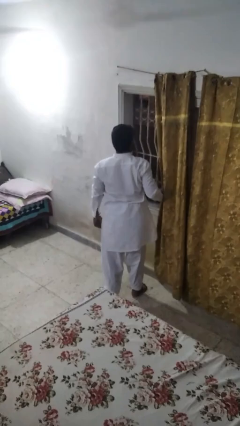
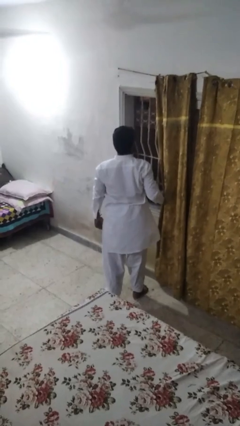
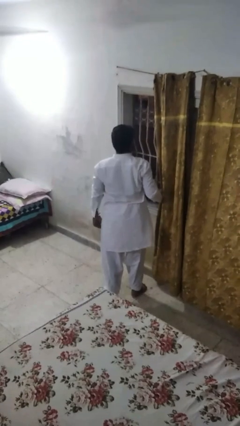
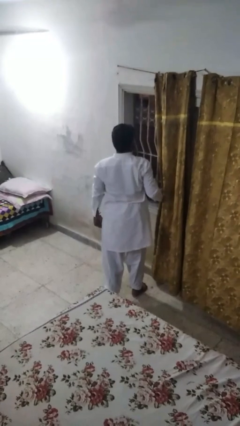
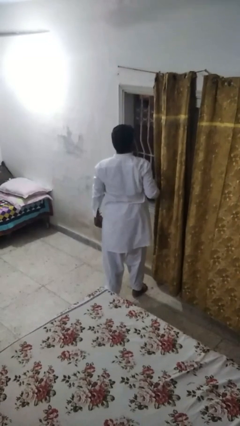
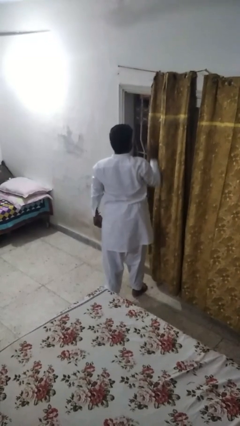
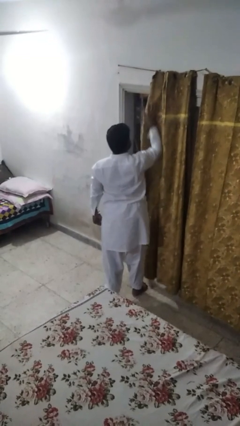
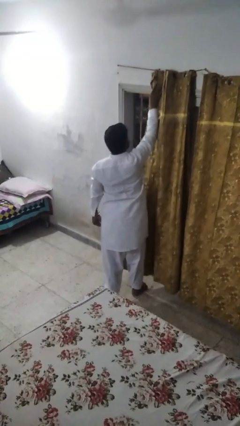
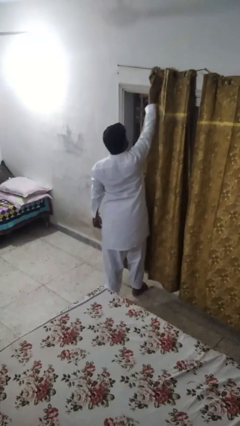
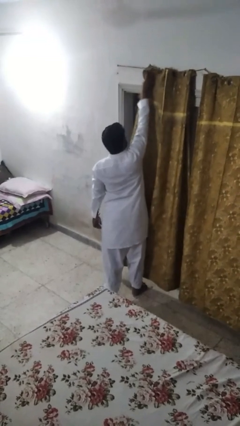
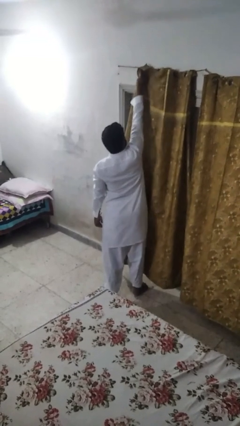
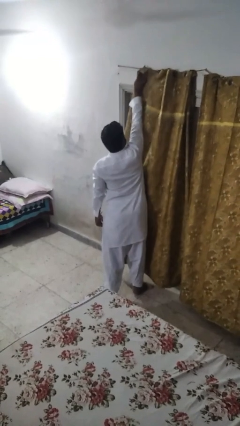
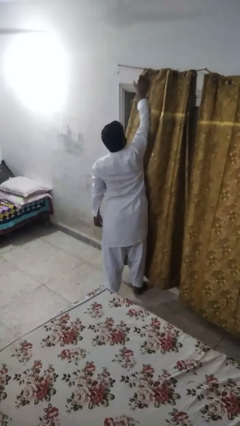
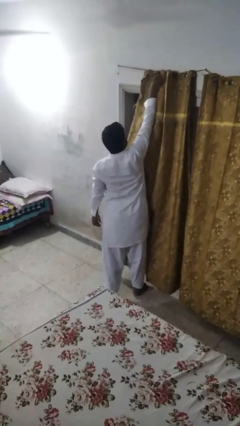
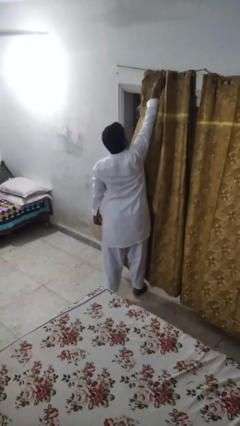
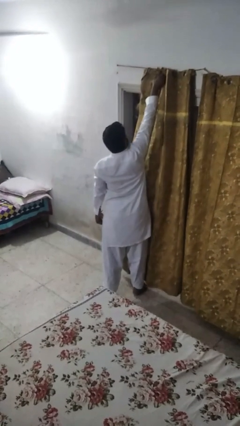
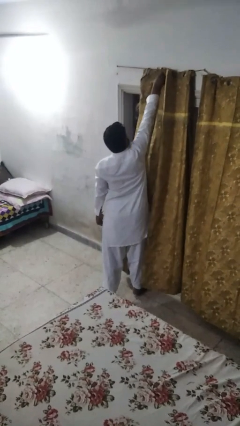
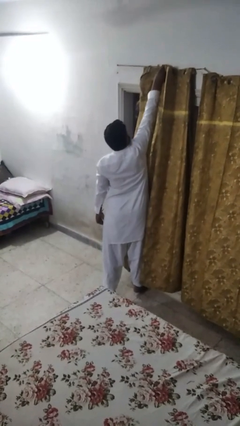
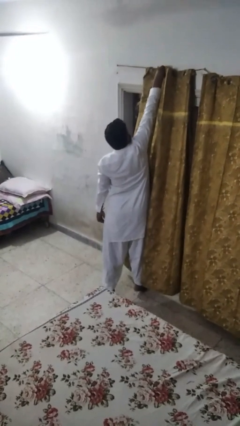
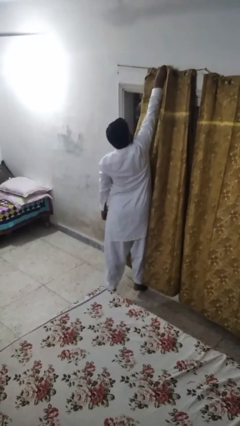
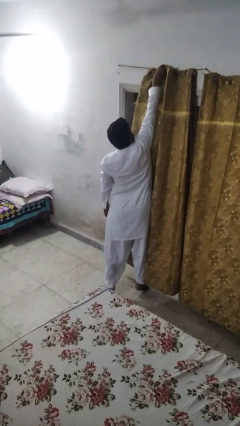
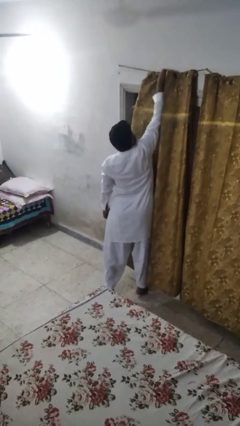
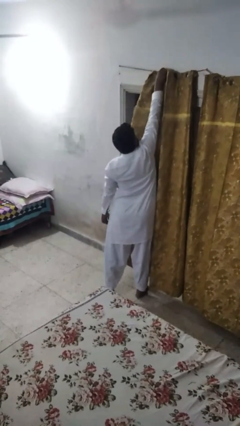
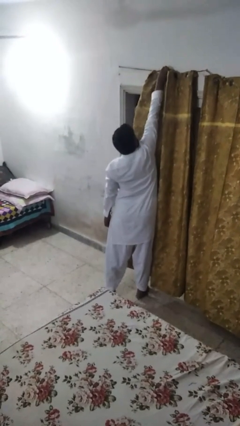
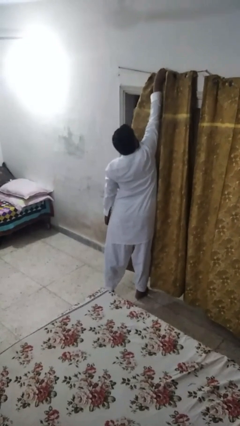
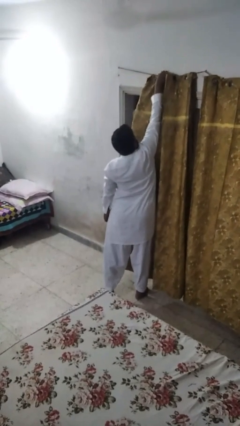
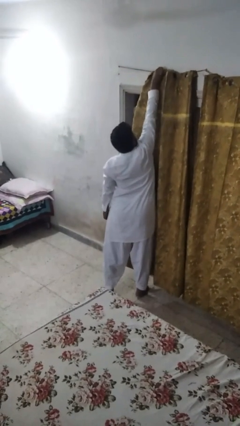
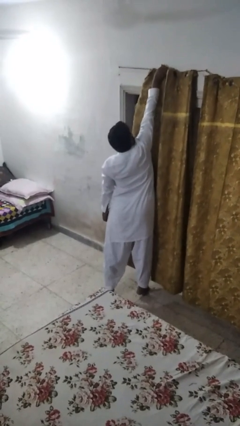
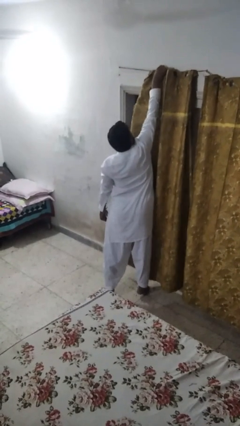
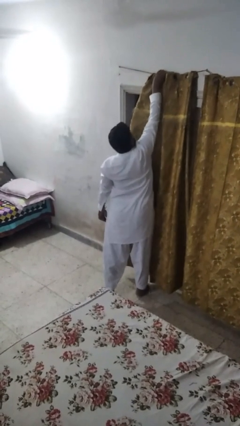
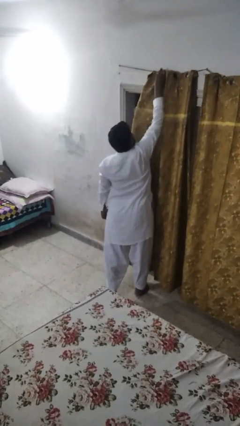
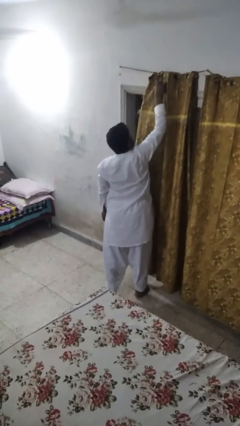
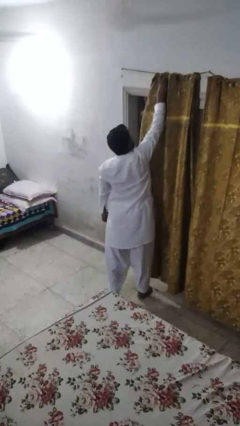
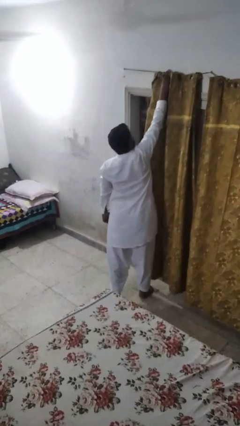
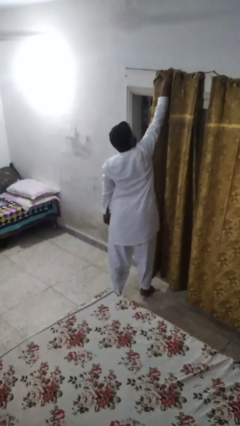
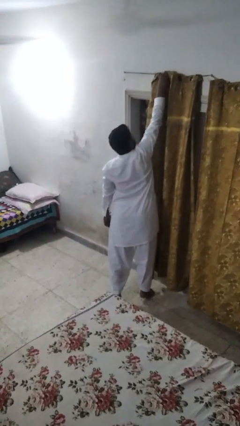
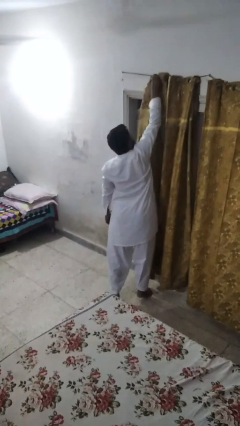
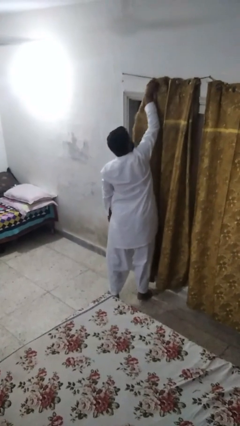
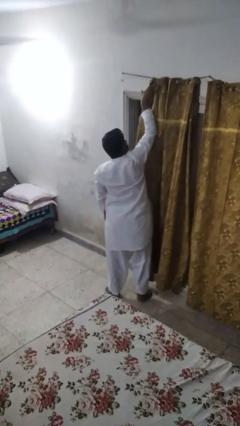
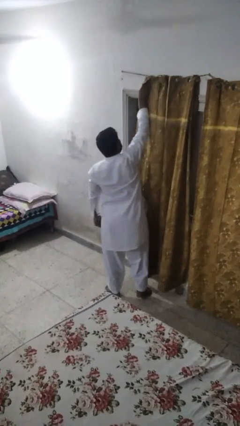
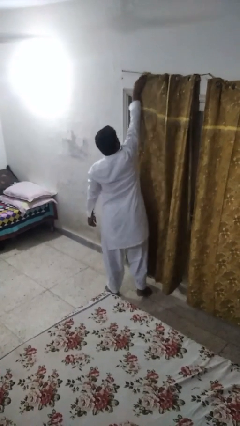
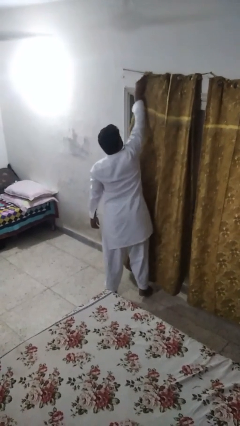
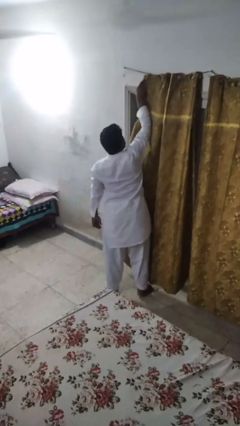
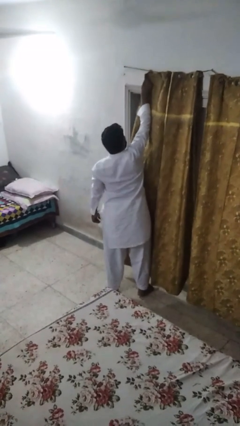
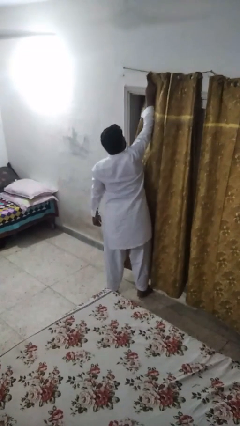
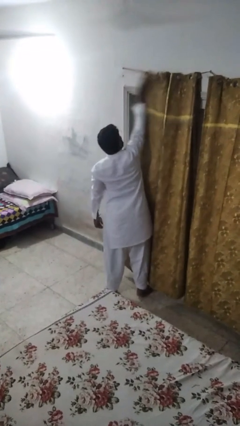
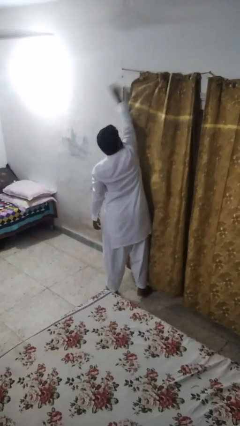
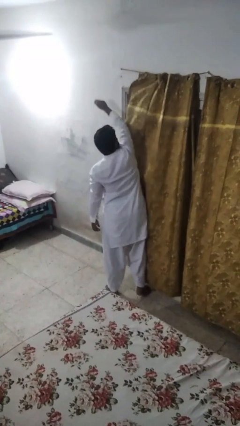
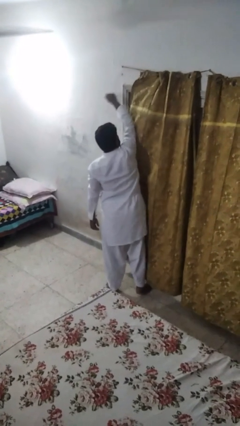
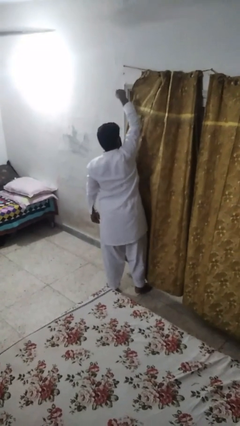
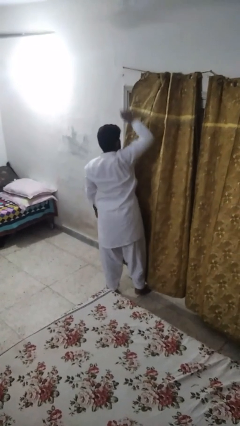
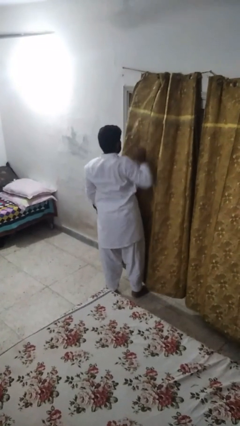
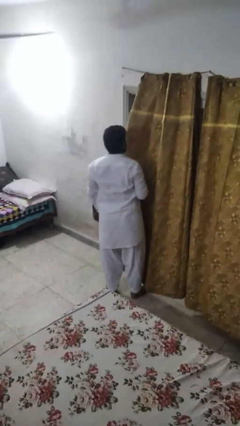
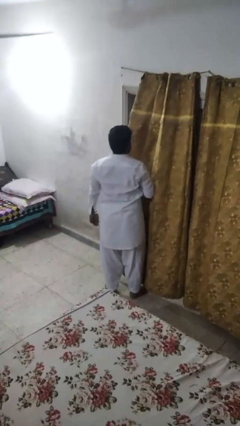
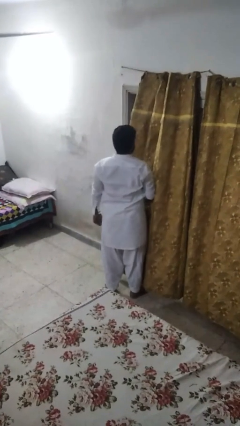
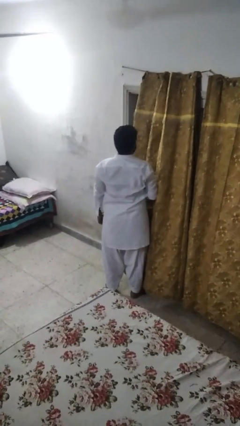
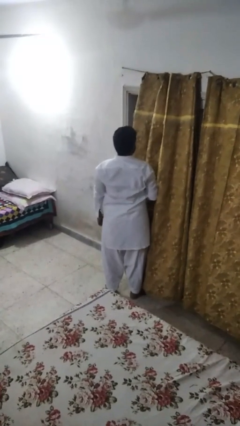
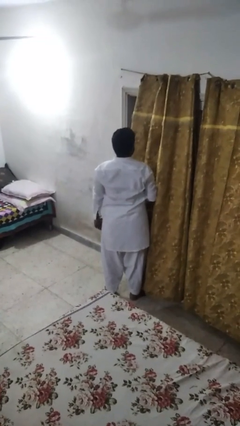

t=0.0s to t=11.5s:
person closes curtains

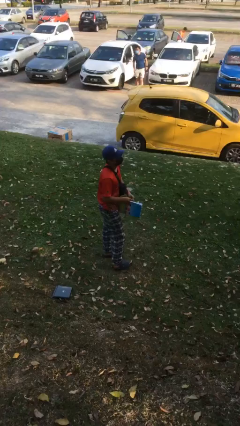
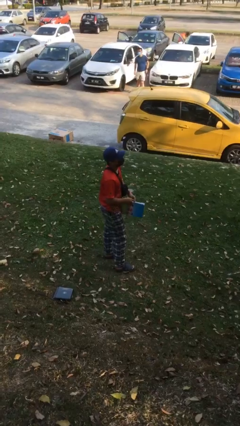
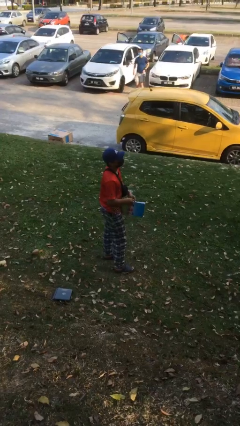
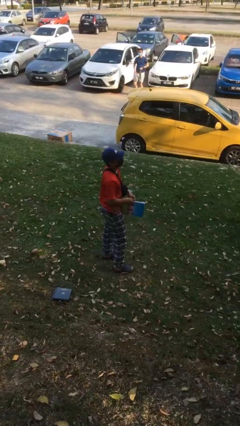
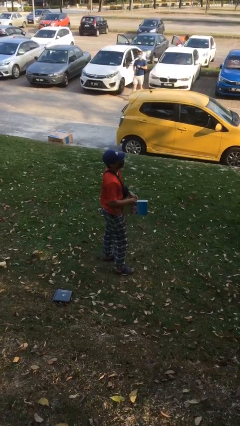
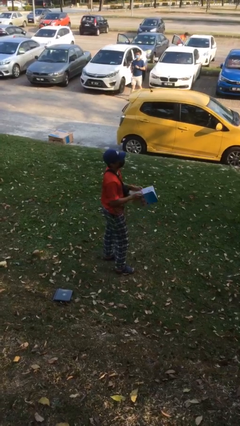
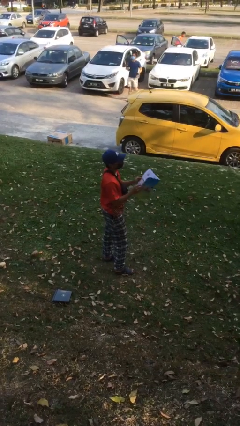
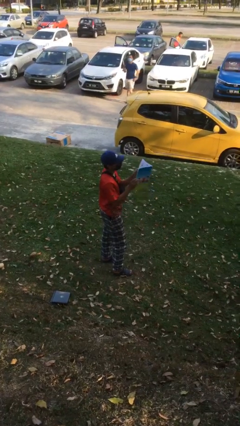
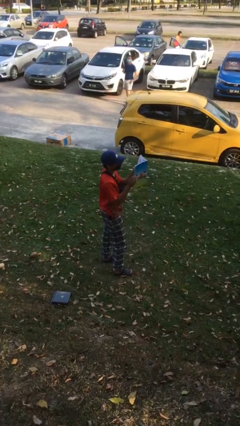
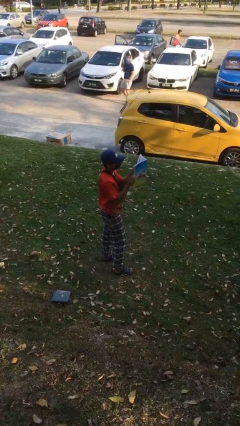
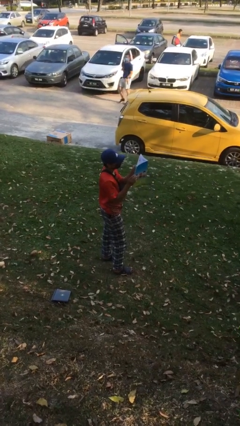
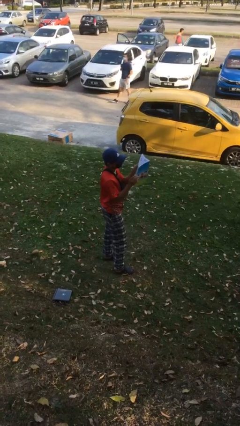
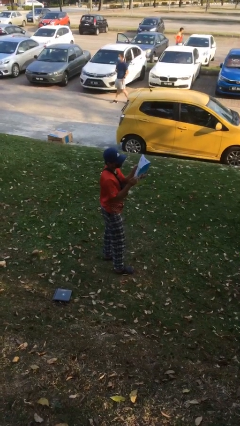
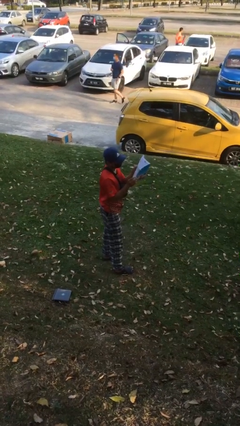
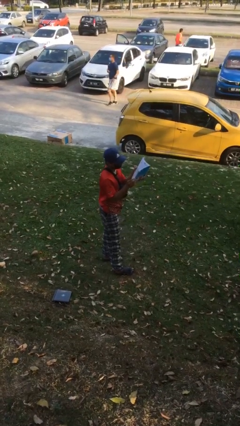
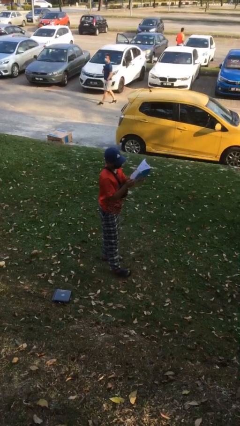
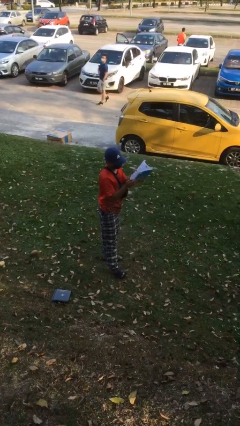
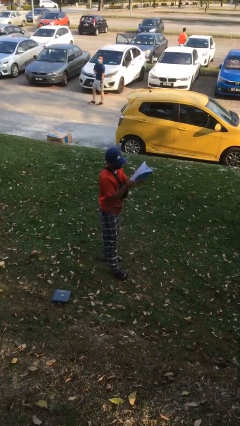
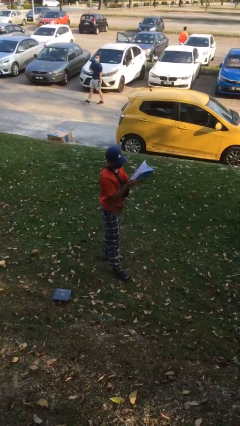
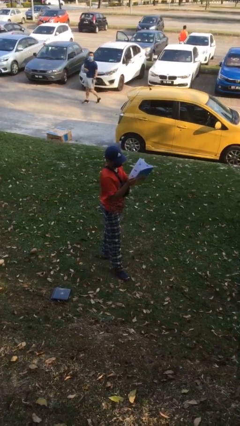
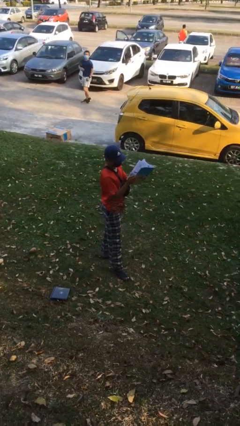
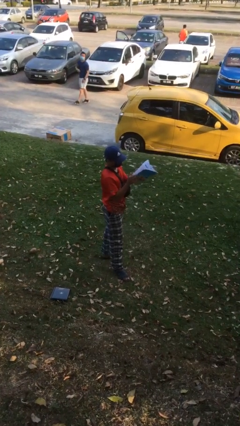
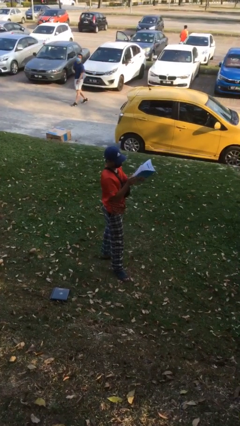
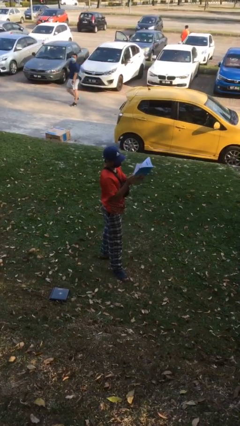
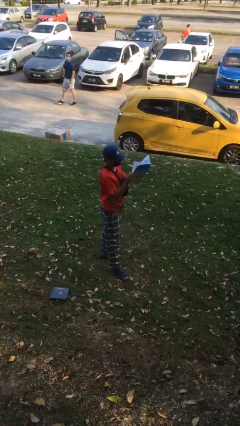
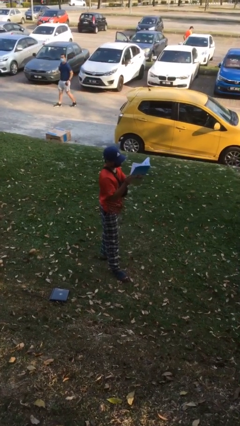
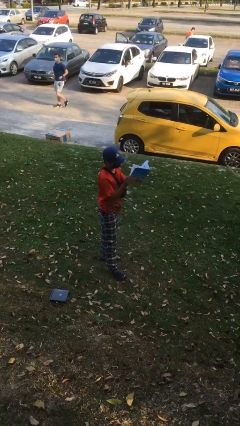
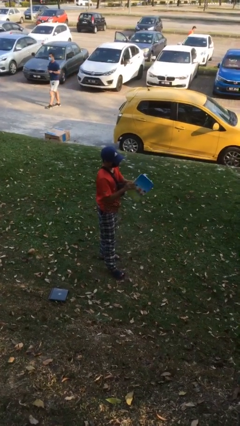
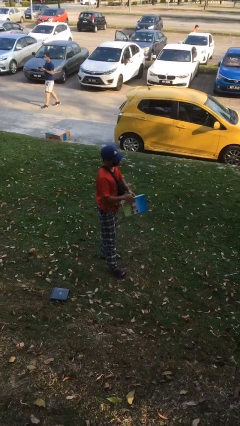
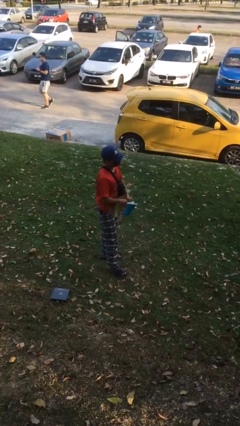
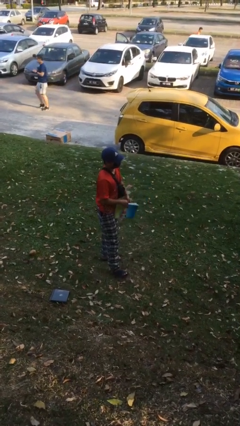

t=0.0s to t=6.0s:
person reads document

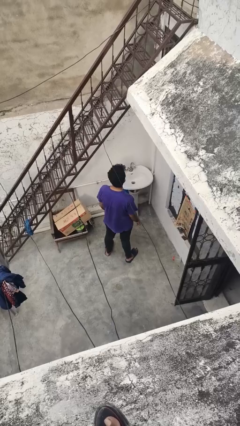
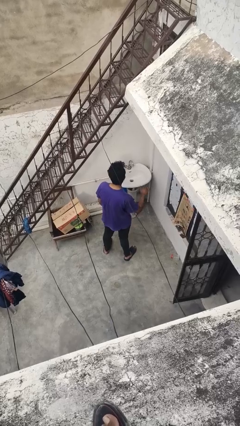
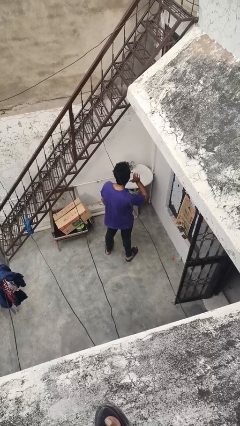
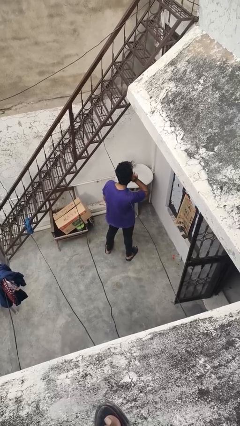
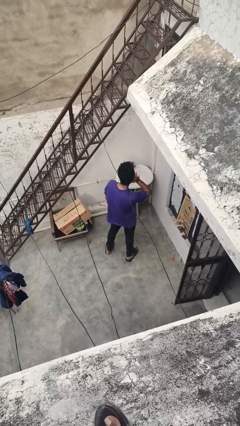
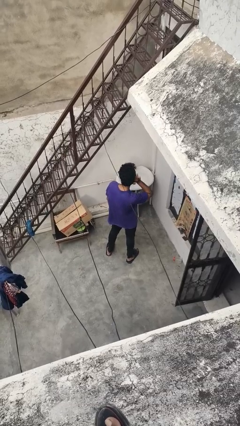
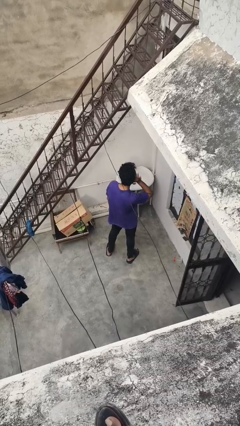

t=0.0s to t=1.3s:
person gestures listen closely
